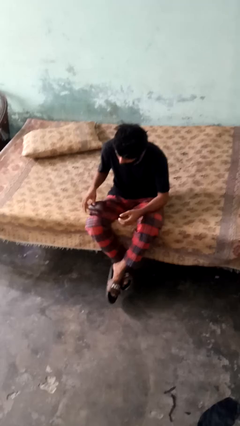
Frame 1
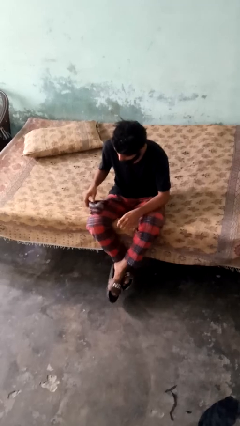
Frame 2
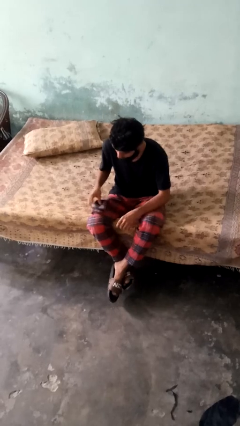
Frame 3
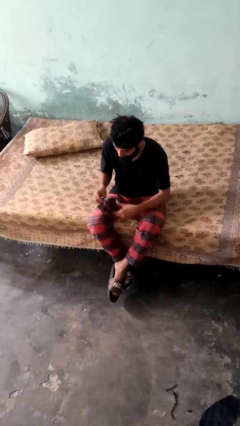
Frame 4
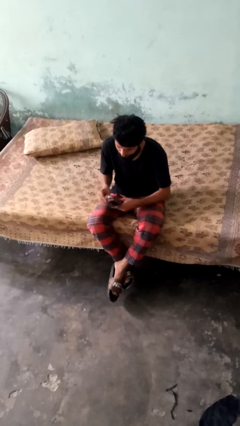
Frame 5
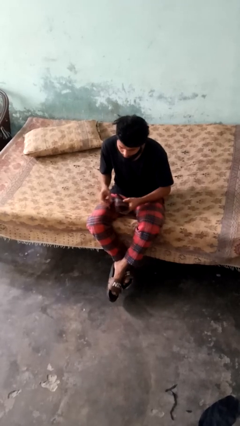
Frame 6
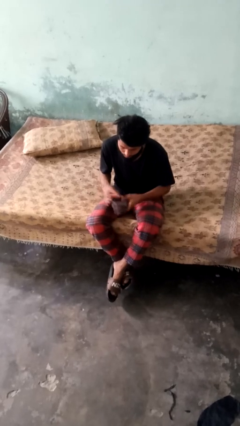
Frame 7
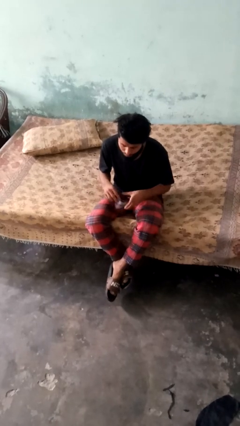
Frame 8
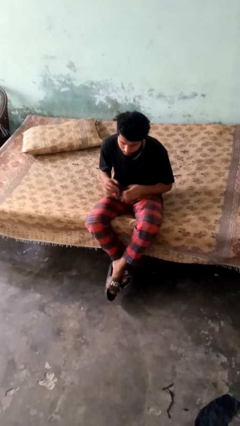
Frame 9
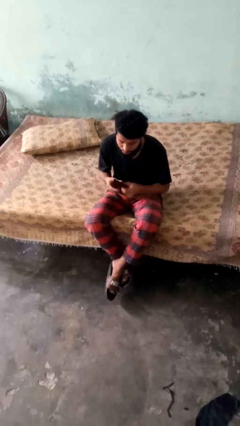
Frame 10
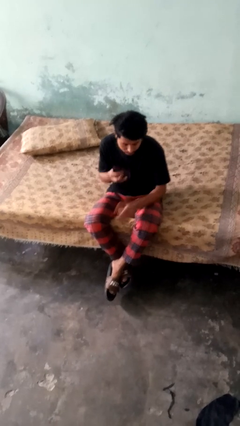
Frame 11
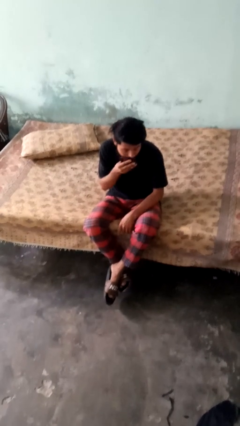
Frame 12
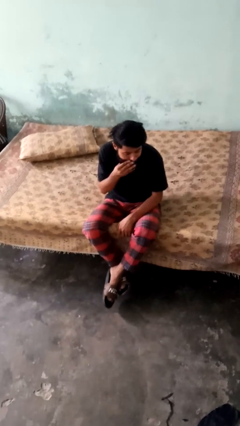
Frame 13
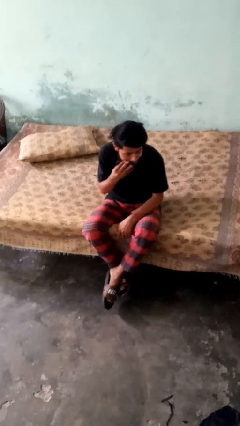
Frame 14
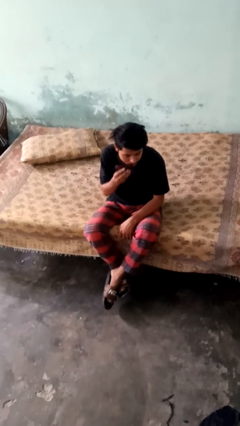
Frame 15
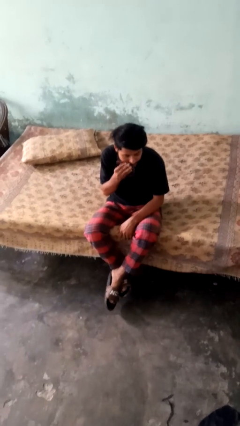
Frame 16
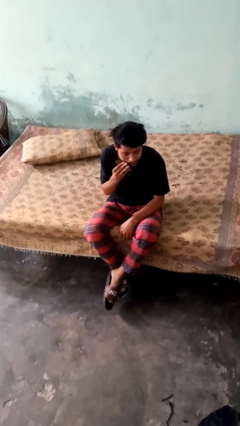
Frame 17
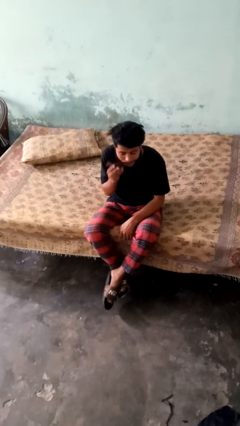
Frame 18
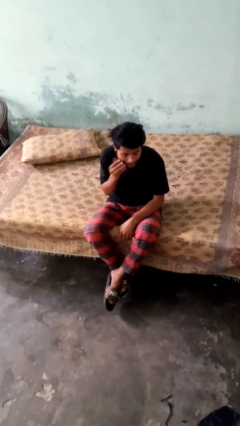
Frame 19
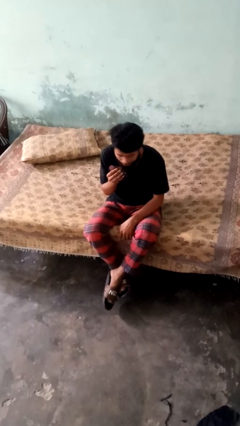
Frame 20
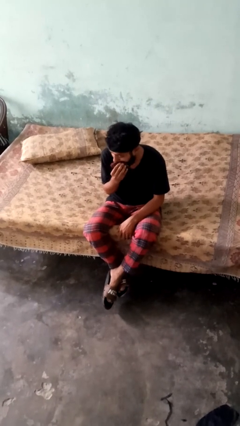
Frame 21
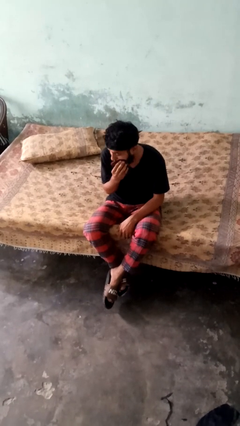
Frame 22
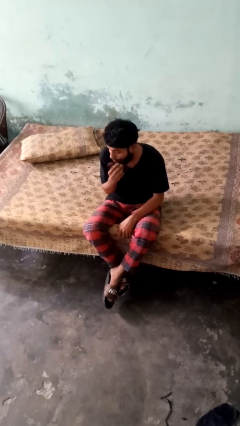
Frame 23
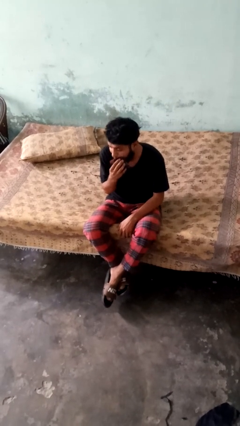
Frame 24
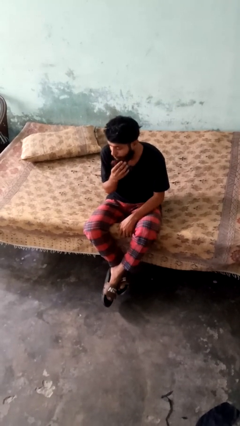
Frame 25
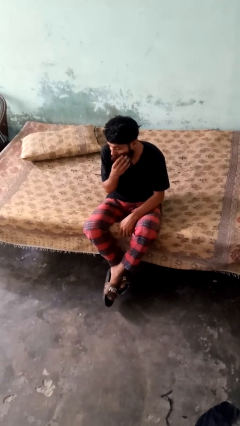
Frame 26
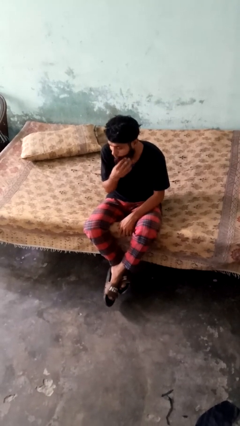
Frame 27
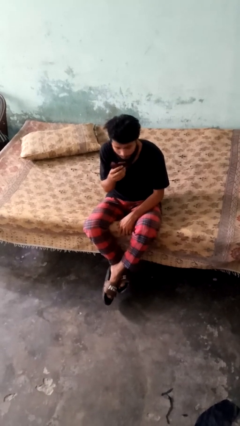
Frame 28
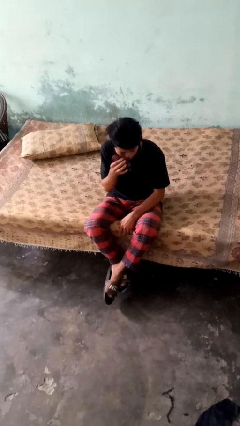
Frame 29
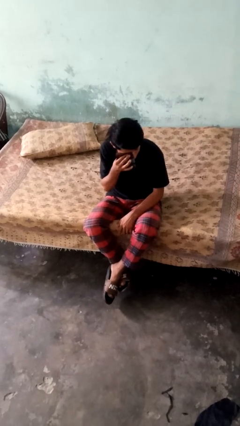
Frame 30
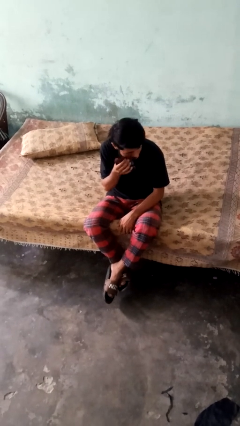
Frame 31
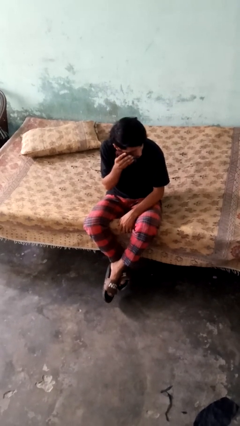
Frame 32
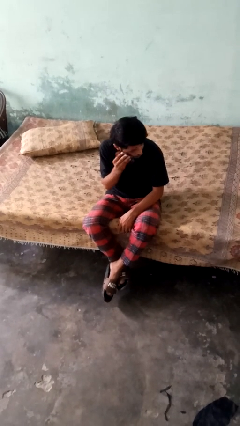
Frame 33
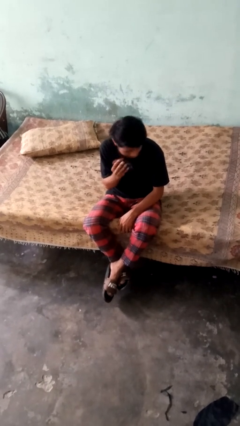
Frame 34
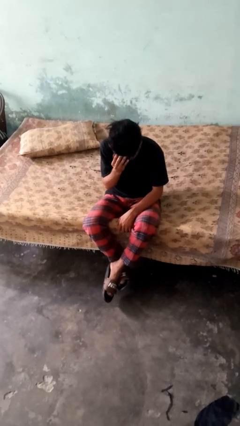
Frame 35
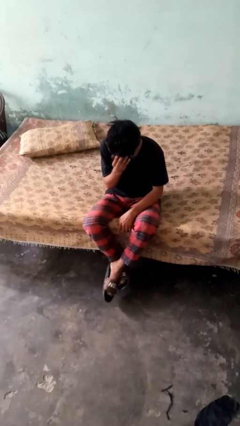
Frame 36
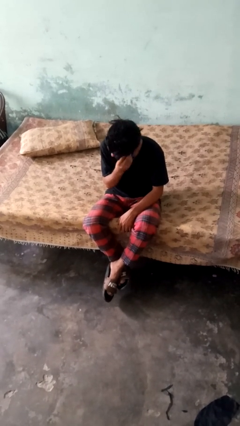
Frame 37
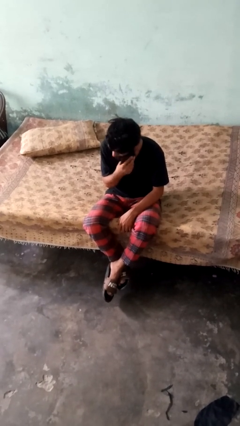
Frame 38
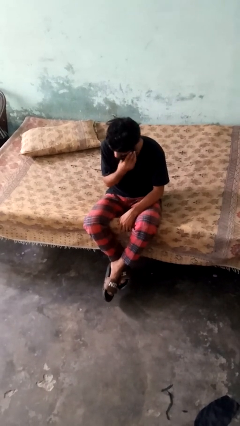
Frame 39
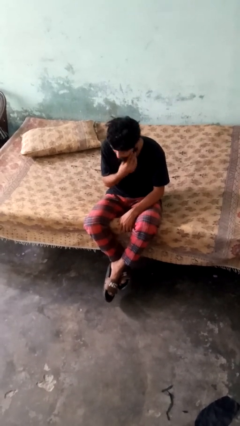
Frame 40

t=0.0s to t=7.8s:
person wipes mouth with napkin

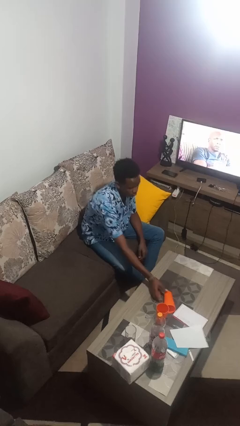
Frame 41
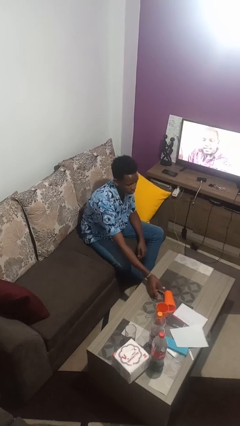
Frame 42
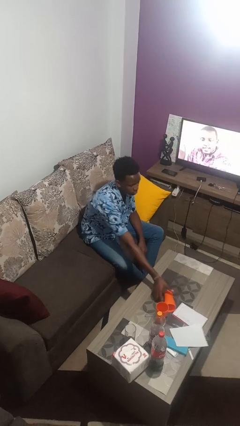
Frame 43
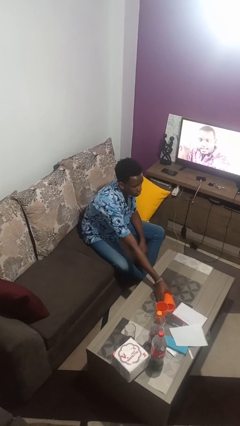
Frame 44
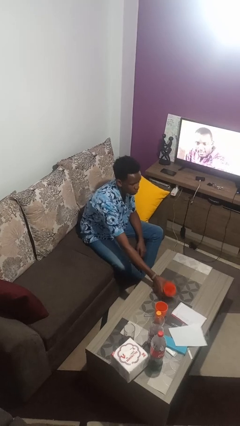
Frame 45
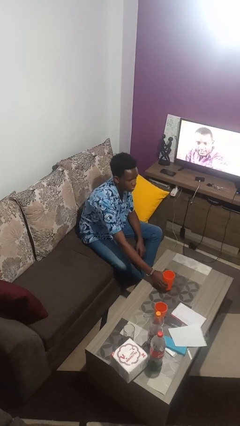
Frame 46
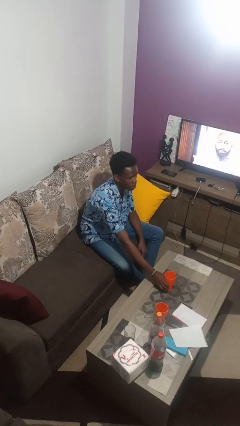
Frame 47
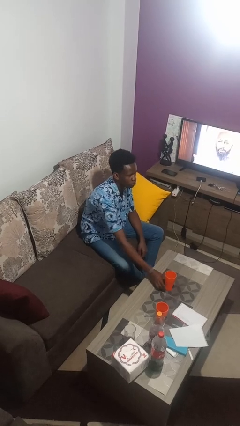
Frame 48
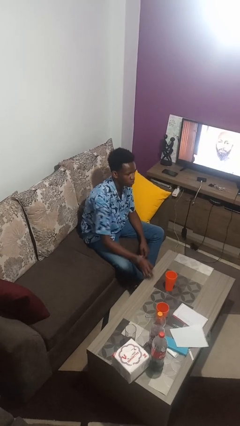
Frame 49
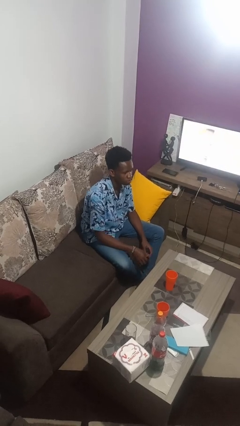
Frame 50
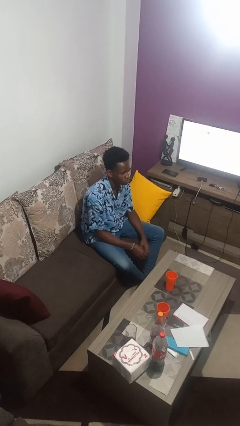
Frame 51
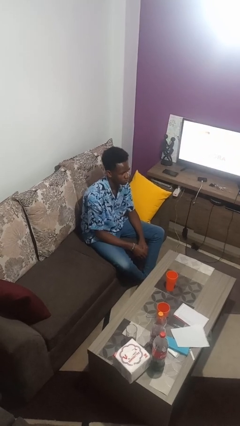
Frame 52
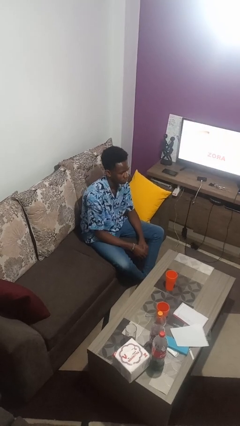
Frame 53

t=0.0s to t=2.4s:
person sets upright glass

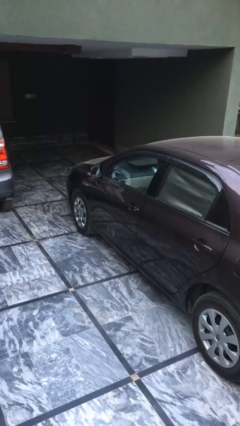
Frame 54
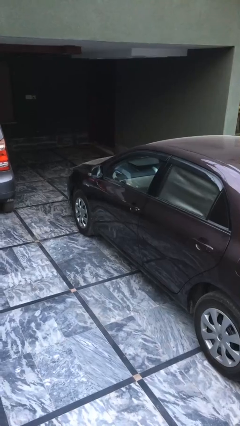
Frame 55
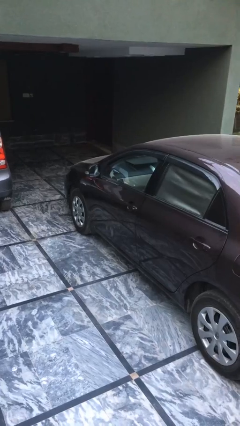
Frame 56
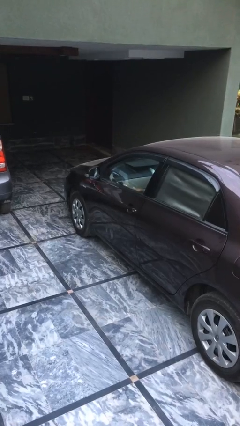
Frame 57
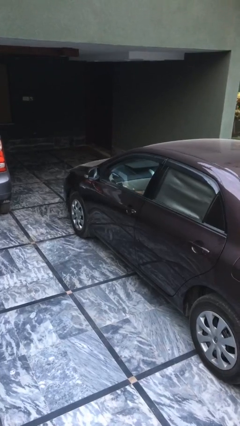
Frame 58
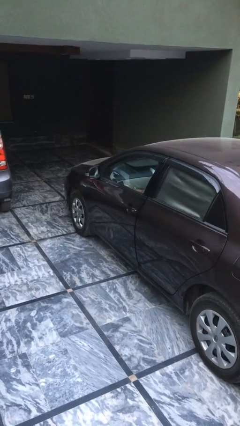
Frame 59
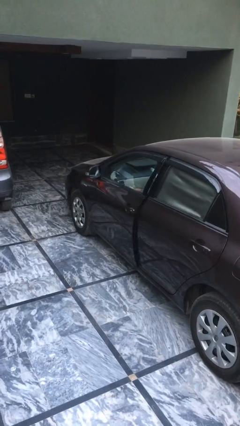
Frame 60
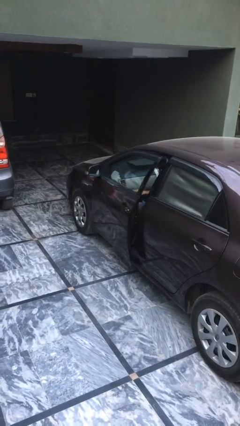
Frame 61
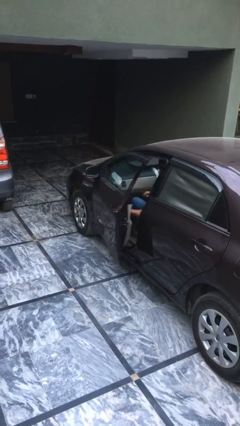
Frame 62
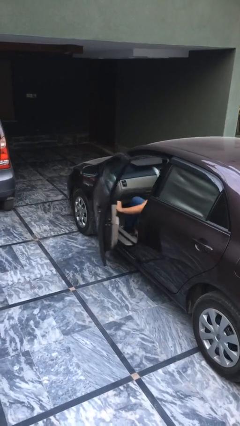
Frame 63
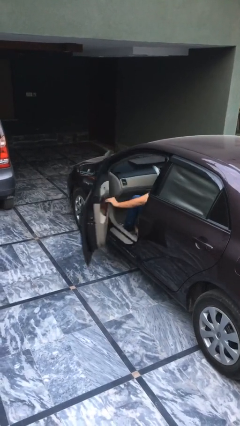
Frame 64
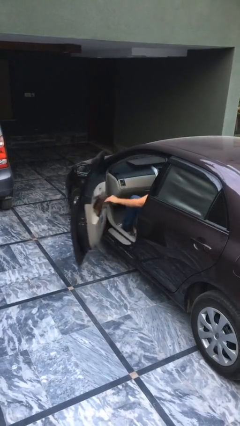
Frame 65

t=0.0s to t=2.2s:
person opens car door

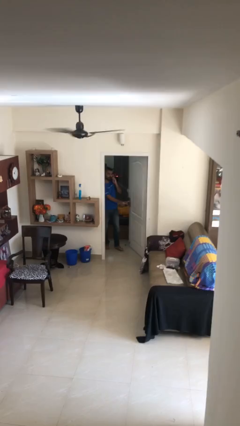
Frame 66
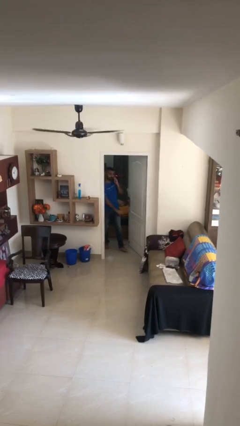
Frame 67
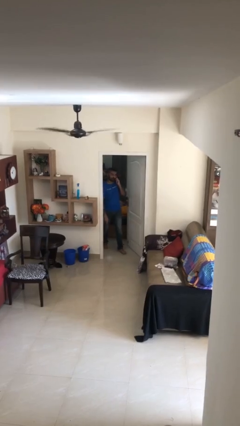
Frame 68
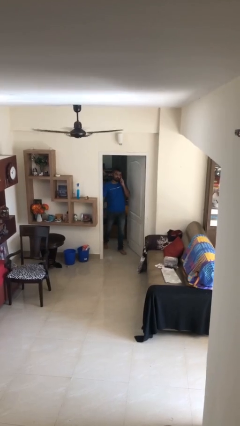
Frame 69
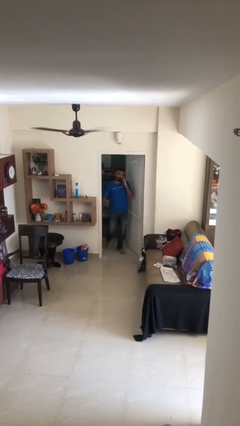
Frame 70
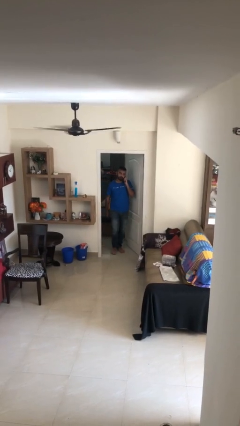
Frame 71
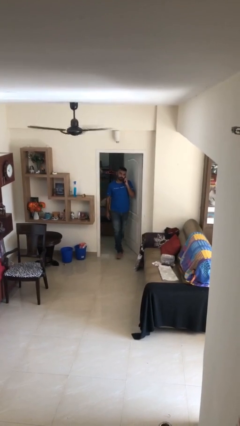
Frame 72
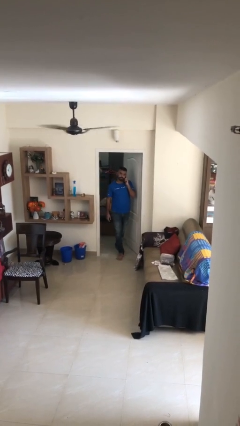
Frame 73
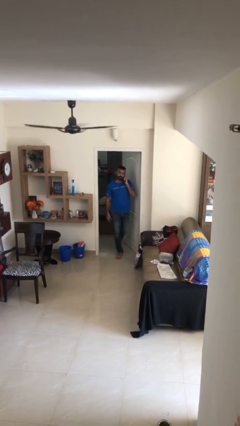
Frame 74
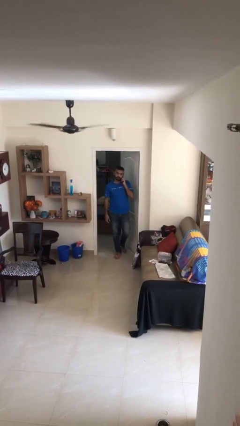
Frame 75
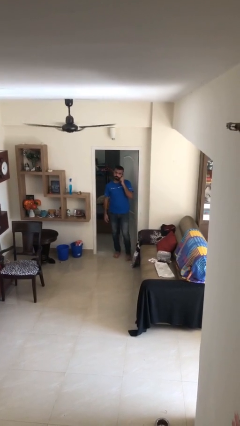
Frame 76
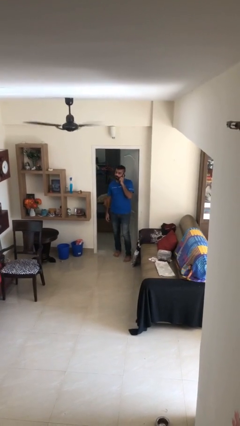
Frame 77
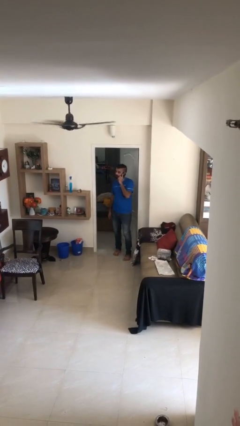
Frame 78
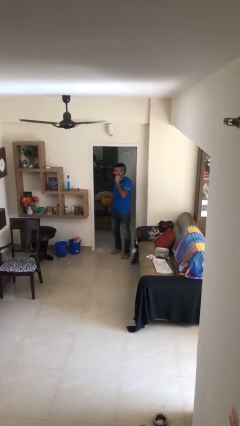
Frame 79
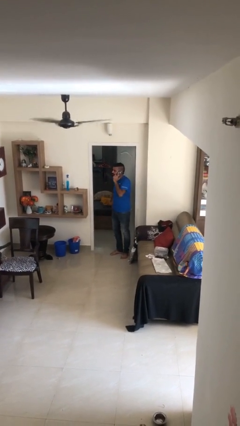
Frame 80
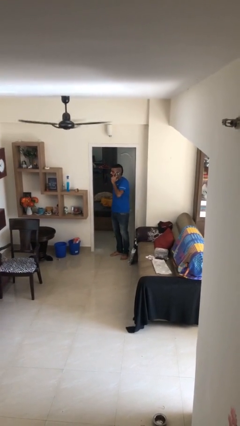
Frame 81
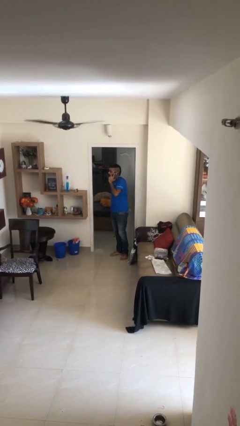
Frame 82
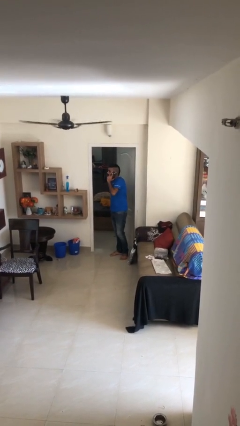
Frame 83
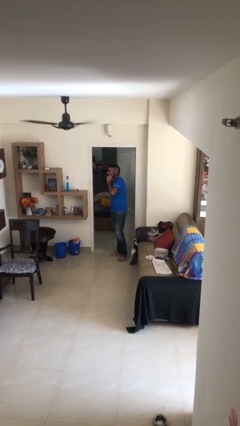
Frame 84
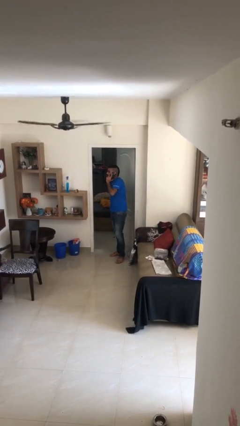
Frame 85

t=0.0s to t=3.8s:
person enters scene through structure

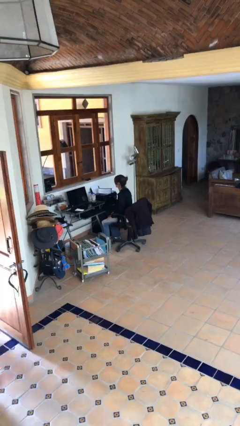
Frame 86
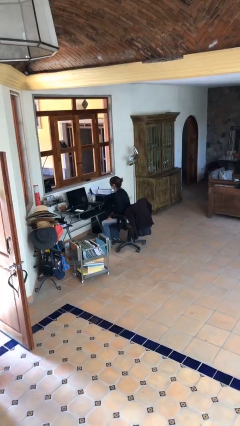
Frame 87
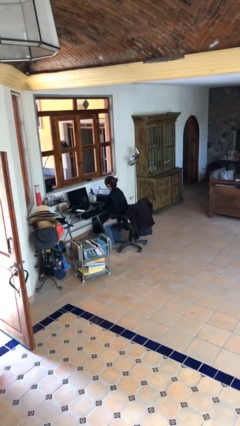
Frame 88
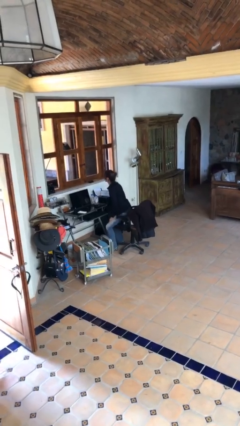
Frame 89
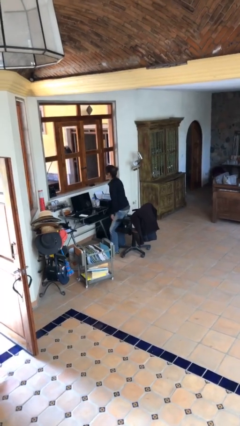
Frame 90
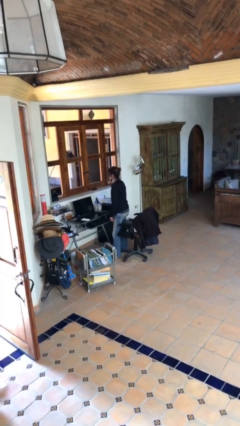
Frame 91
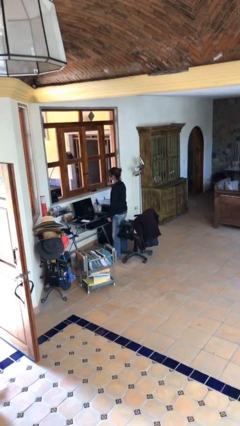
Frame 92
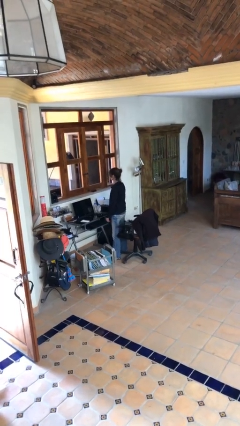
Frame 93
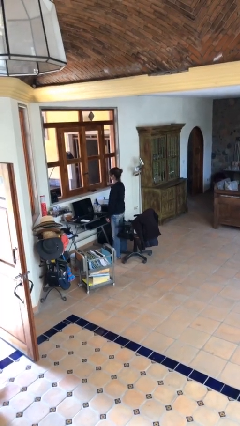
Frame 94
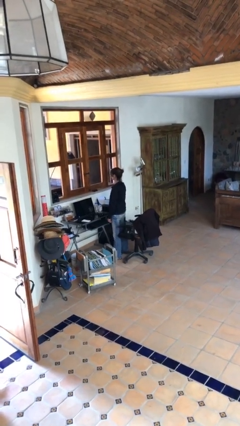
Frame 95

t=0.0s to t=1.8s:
person stands up
